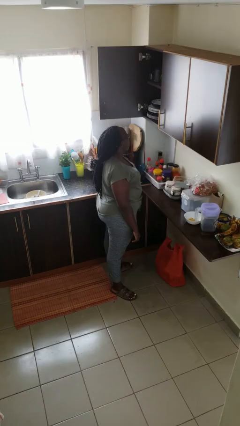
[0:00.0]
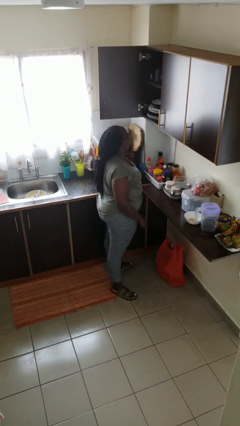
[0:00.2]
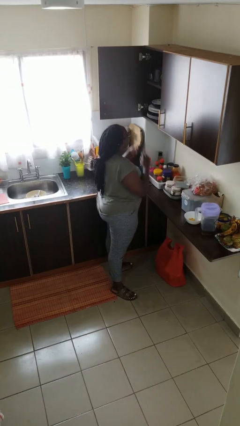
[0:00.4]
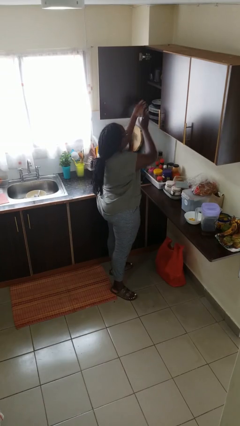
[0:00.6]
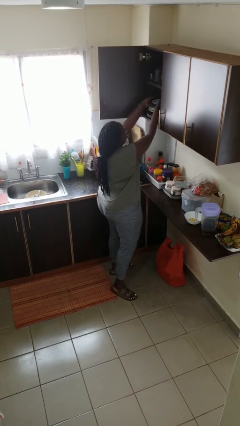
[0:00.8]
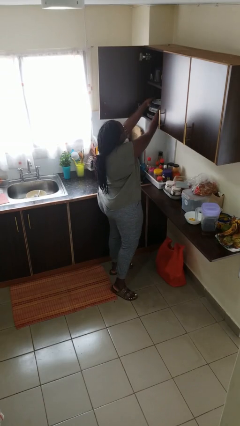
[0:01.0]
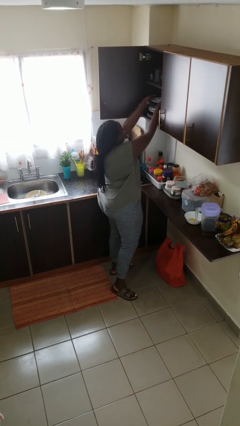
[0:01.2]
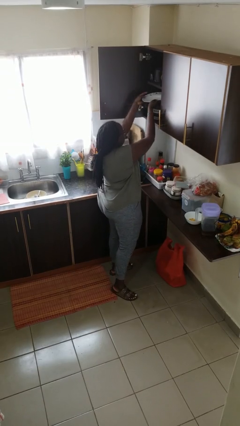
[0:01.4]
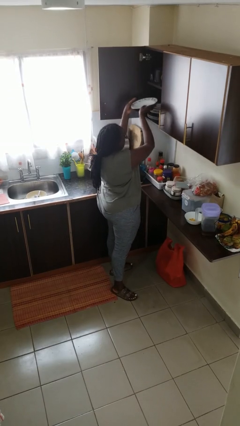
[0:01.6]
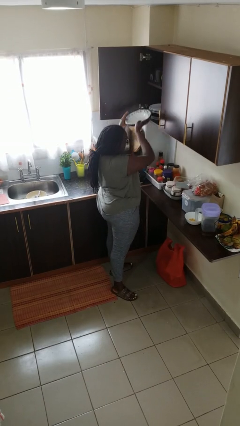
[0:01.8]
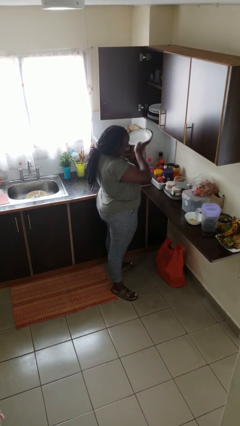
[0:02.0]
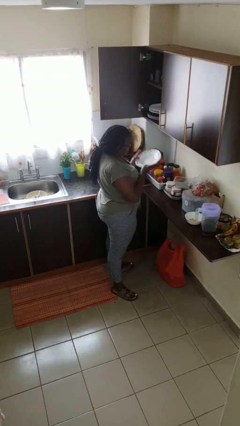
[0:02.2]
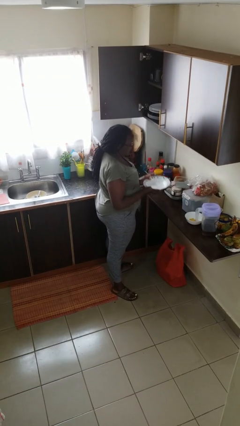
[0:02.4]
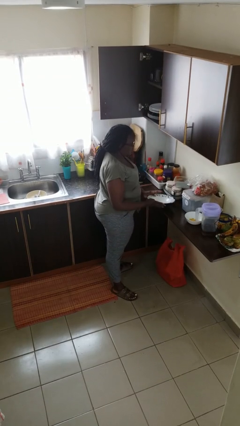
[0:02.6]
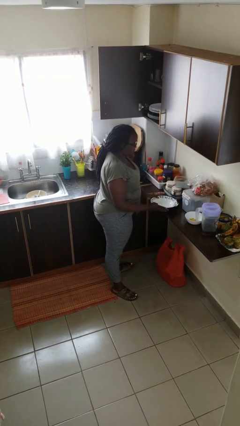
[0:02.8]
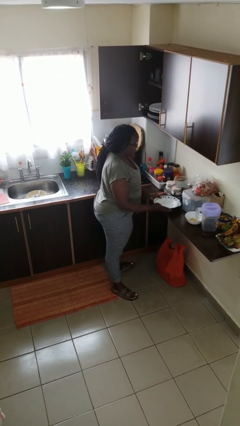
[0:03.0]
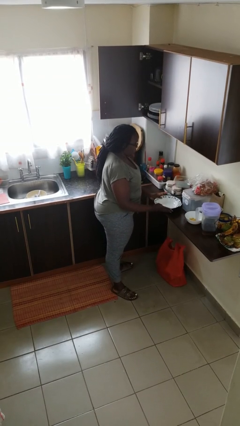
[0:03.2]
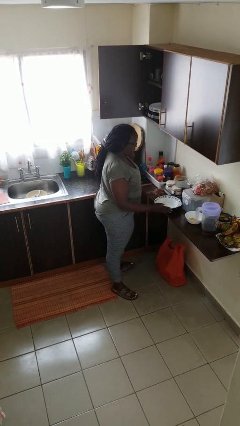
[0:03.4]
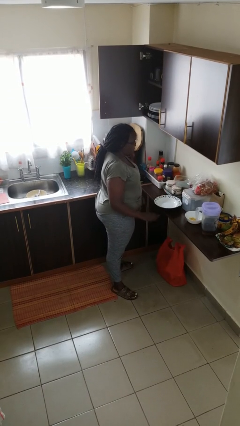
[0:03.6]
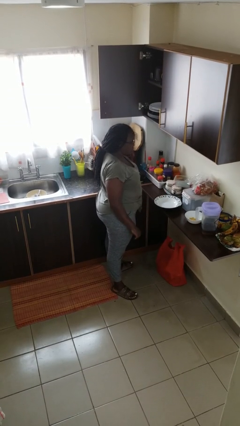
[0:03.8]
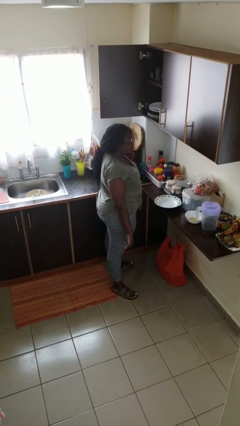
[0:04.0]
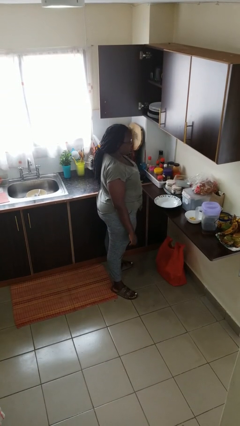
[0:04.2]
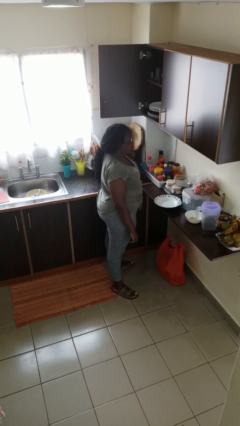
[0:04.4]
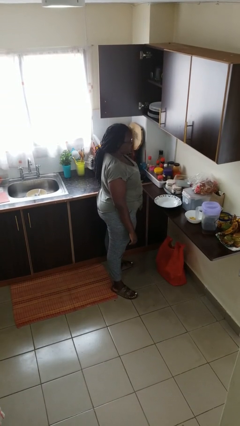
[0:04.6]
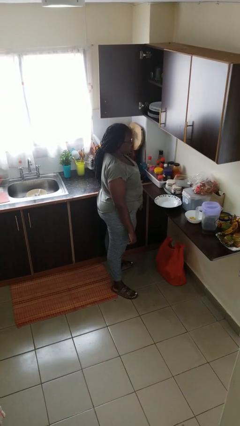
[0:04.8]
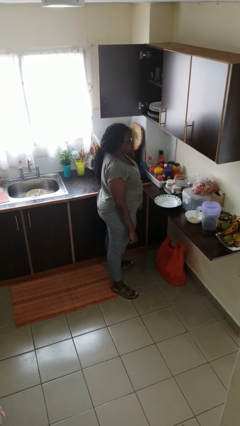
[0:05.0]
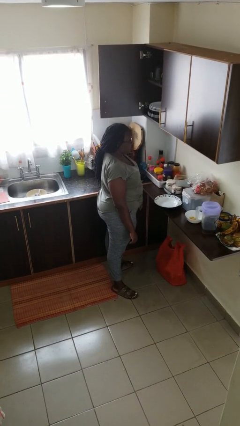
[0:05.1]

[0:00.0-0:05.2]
person takes object from cabinet

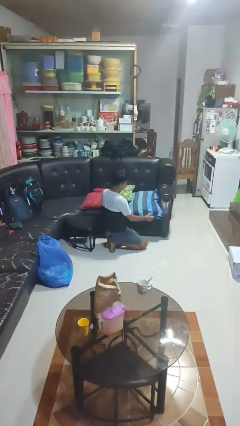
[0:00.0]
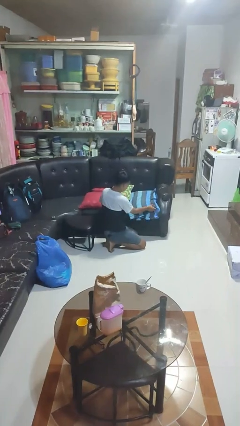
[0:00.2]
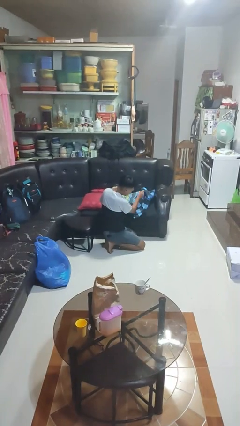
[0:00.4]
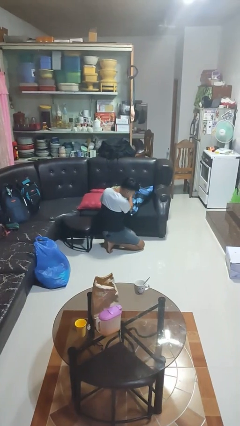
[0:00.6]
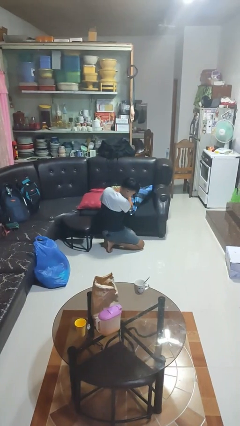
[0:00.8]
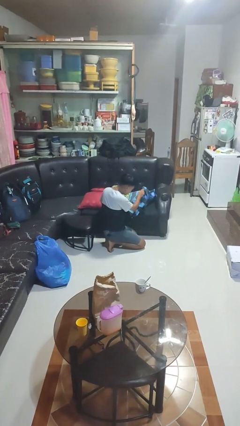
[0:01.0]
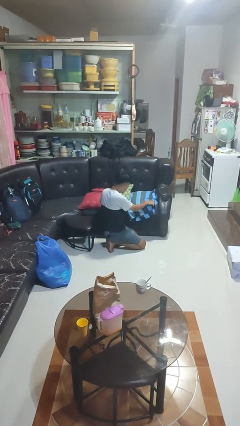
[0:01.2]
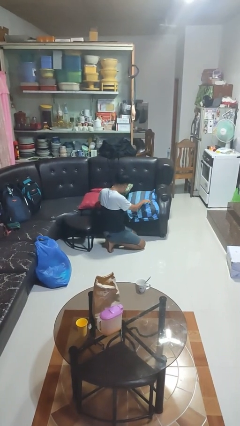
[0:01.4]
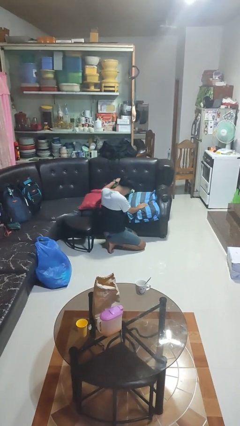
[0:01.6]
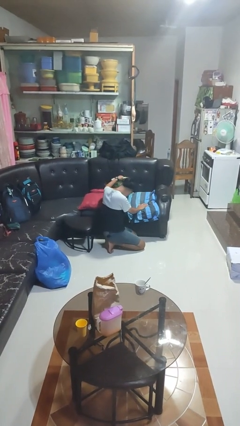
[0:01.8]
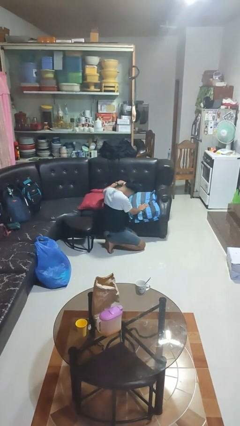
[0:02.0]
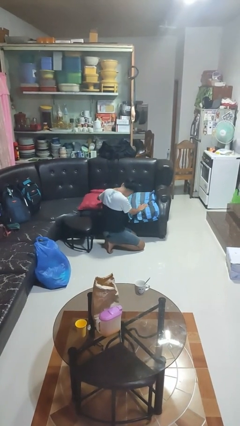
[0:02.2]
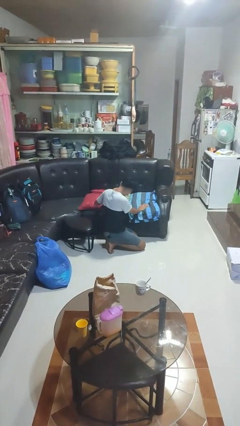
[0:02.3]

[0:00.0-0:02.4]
person searches in couch

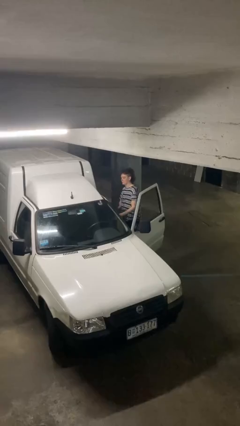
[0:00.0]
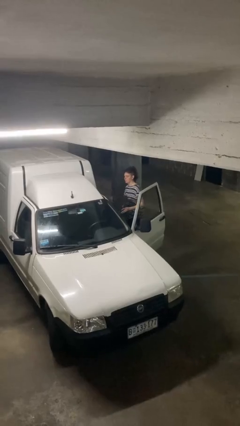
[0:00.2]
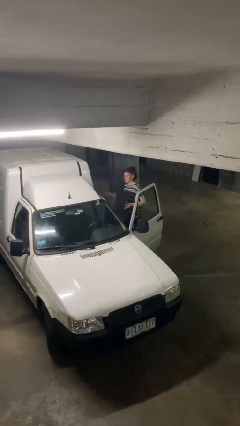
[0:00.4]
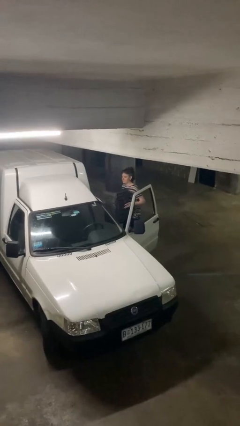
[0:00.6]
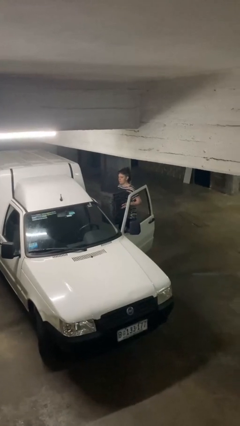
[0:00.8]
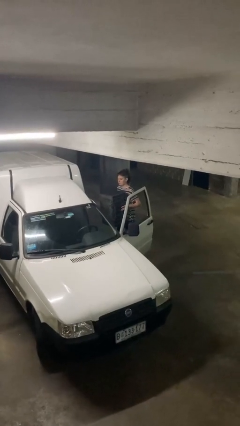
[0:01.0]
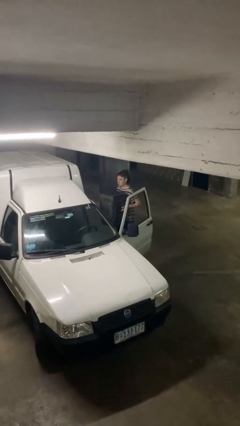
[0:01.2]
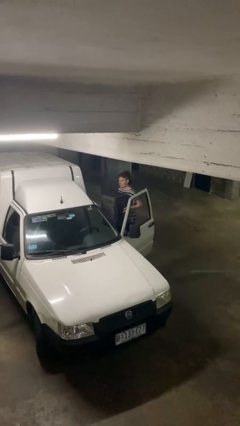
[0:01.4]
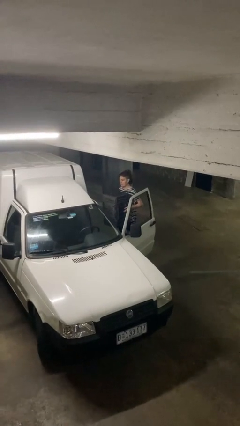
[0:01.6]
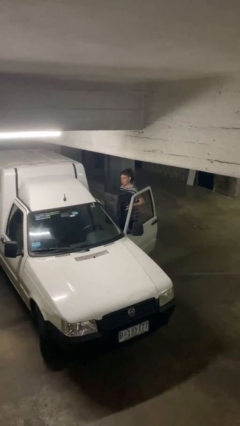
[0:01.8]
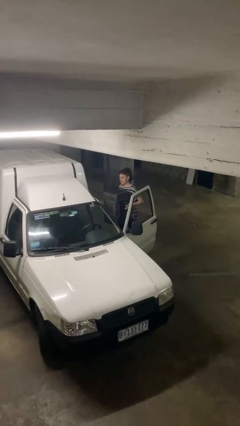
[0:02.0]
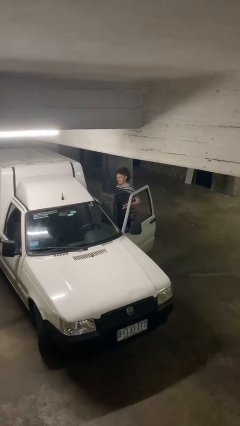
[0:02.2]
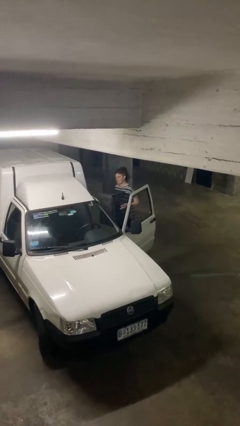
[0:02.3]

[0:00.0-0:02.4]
person unloads car

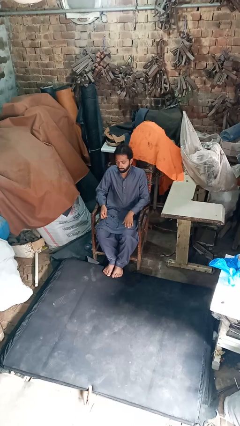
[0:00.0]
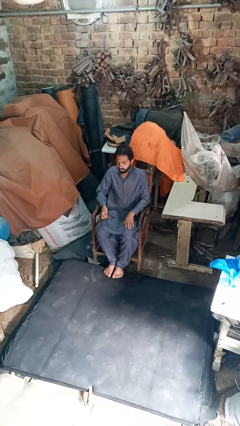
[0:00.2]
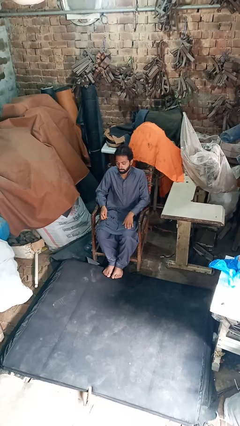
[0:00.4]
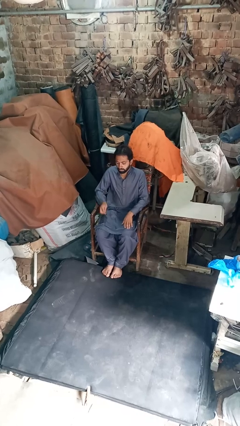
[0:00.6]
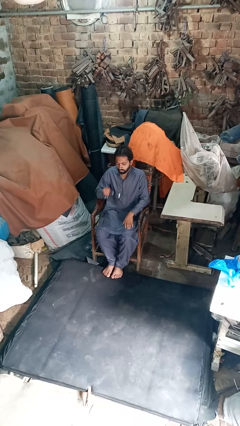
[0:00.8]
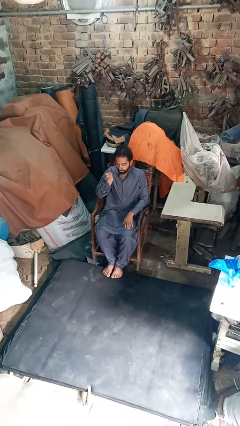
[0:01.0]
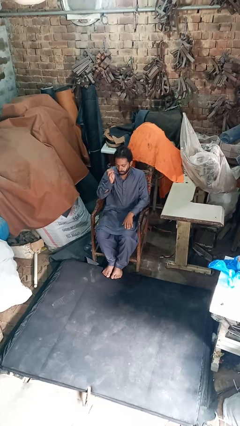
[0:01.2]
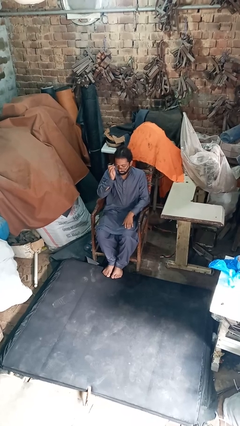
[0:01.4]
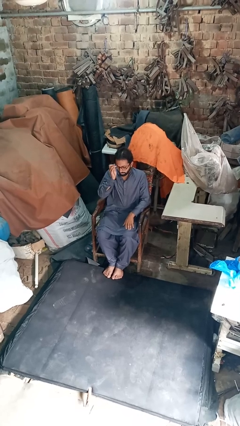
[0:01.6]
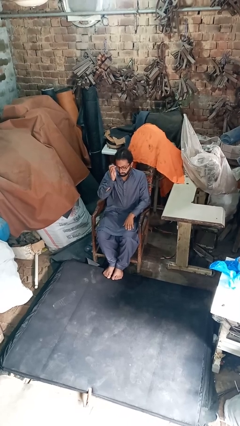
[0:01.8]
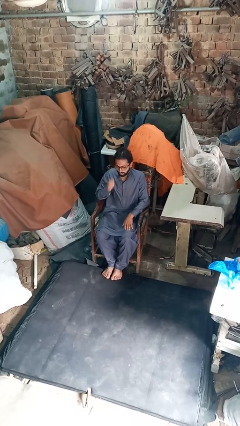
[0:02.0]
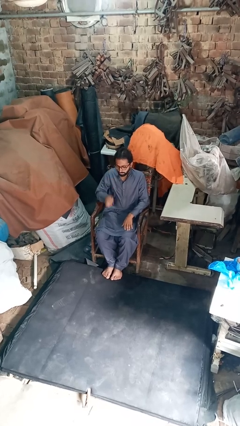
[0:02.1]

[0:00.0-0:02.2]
person puts on glasses

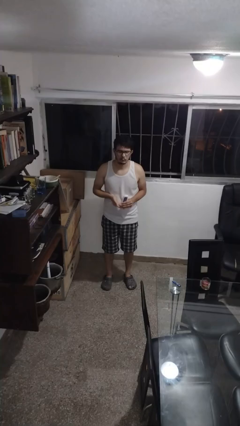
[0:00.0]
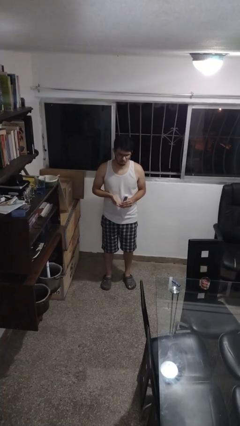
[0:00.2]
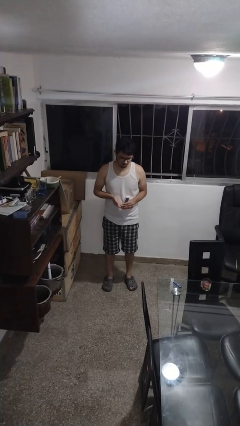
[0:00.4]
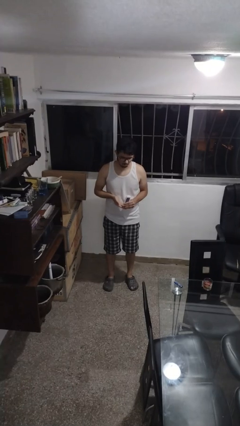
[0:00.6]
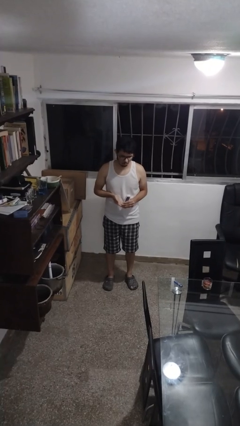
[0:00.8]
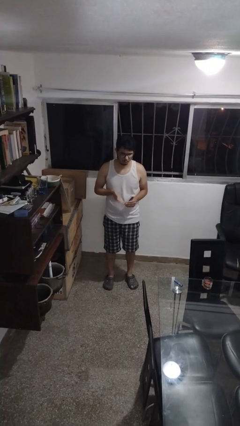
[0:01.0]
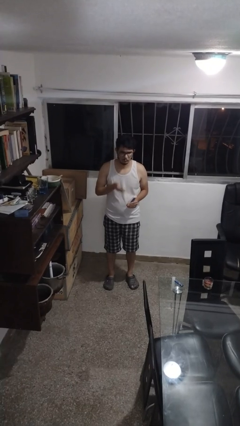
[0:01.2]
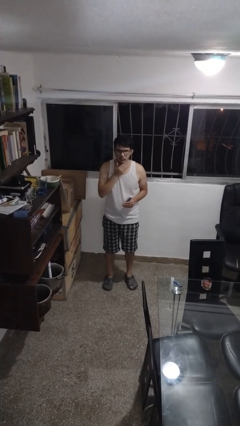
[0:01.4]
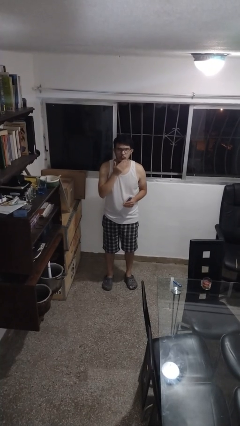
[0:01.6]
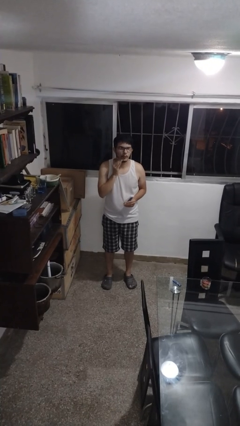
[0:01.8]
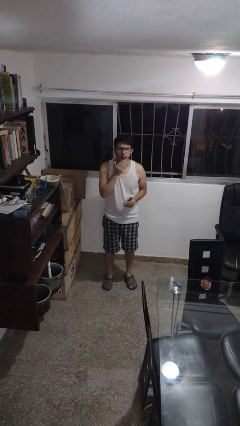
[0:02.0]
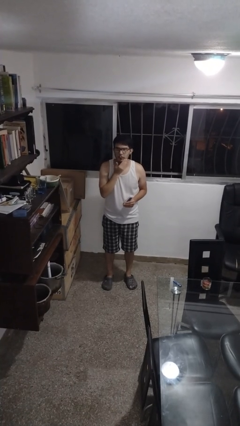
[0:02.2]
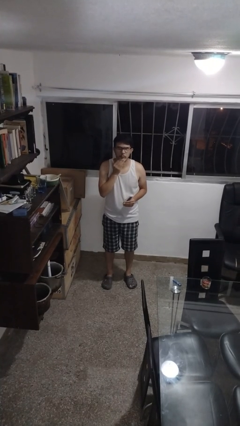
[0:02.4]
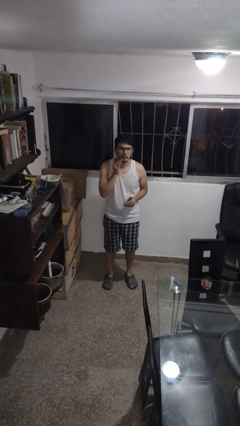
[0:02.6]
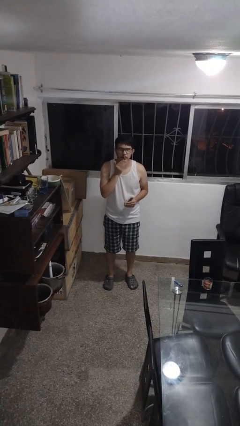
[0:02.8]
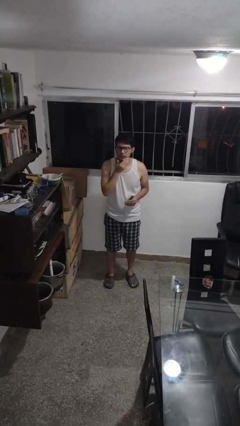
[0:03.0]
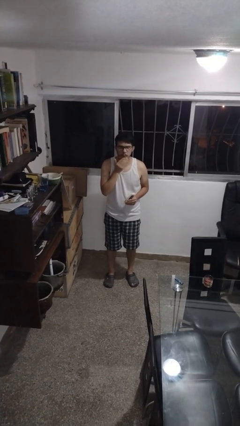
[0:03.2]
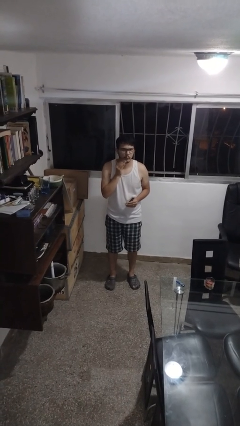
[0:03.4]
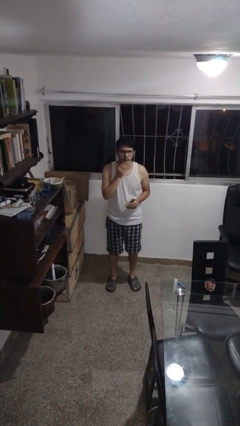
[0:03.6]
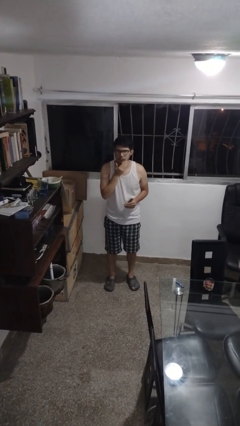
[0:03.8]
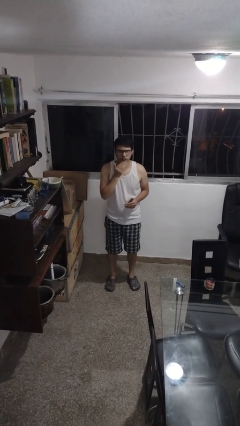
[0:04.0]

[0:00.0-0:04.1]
person applies facial moisturizer

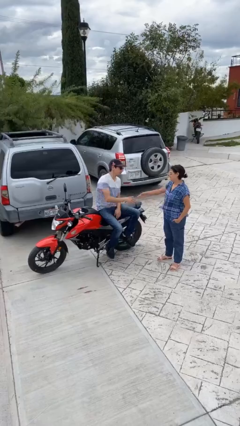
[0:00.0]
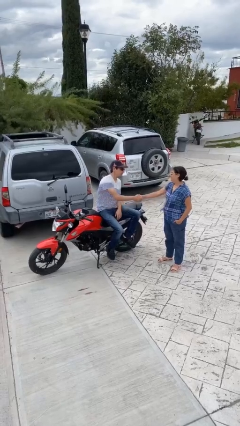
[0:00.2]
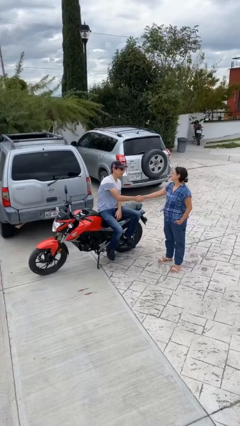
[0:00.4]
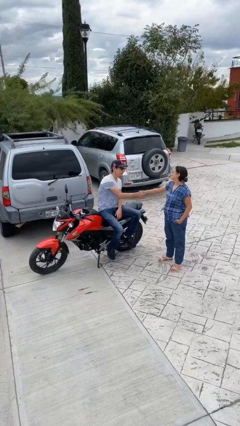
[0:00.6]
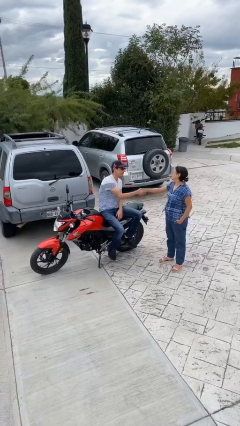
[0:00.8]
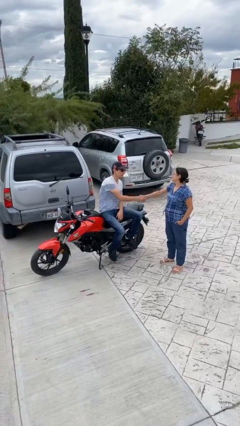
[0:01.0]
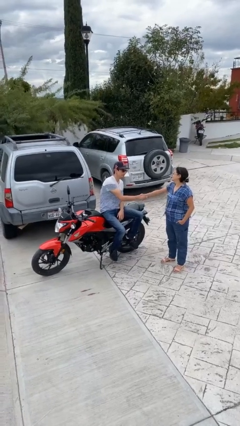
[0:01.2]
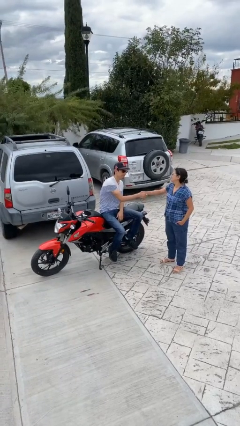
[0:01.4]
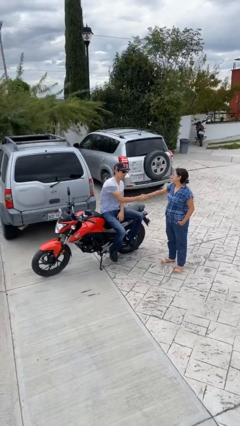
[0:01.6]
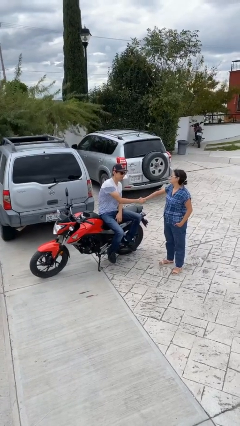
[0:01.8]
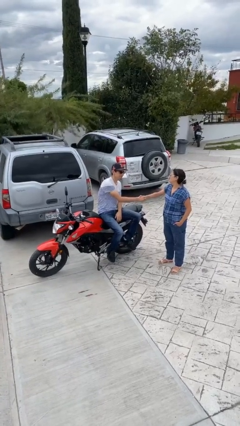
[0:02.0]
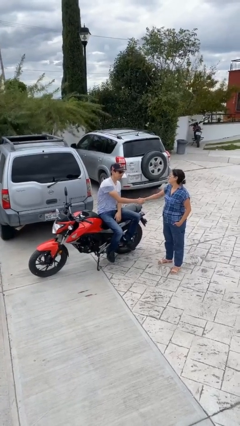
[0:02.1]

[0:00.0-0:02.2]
person shakes hand
